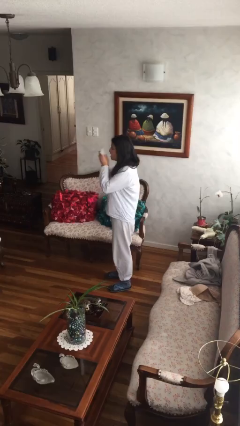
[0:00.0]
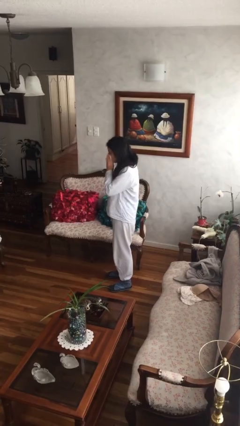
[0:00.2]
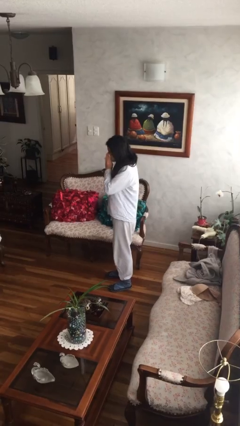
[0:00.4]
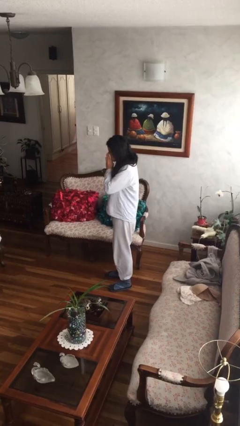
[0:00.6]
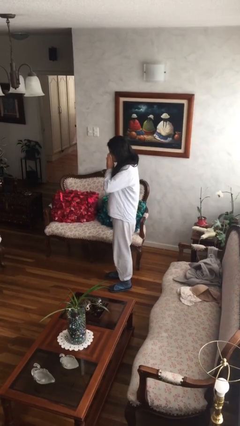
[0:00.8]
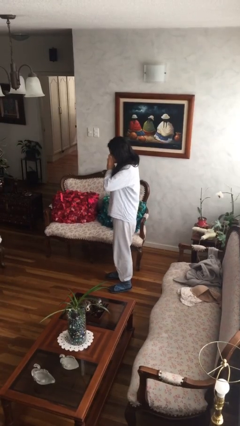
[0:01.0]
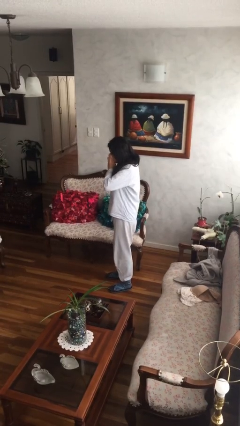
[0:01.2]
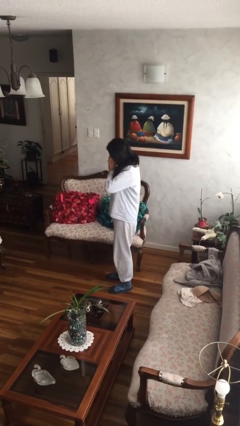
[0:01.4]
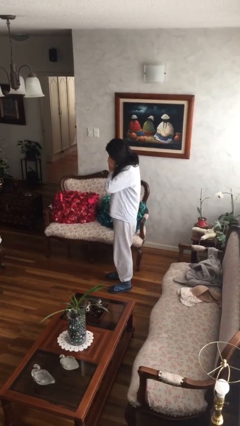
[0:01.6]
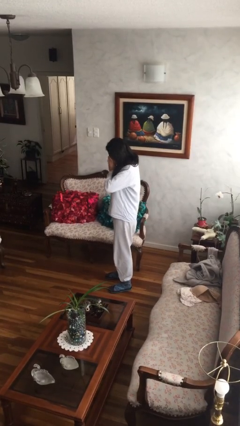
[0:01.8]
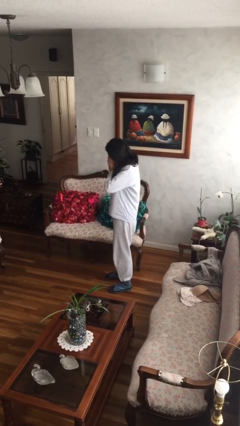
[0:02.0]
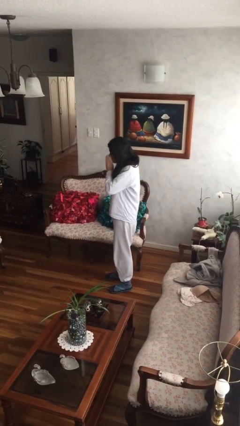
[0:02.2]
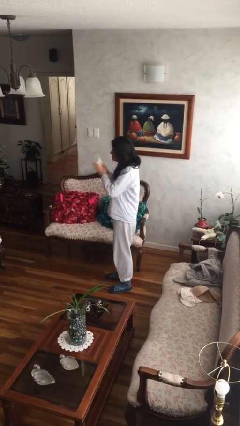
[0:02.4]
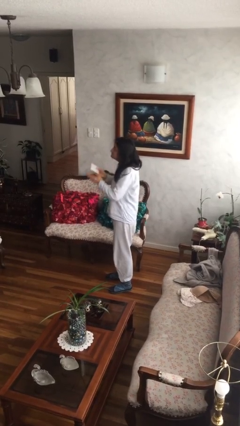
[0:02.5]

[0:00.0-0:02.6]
person blows nose

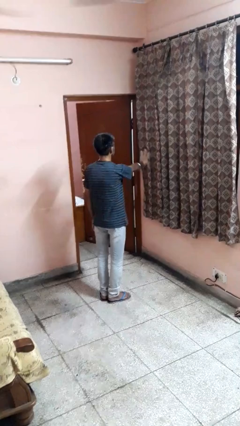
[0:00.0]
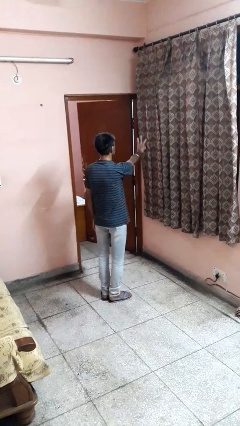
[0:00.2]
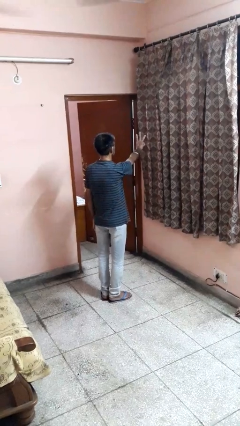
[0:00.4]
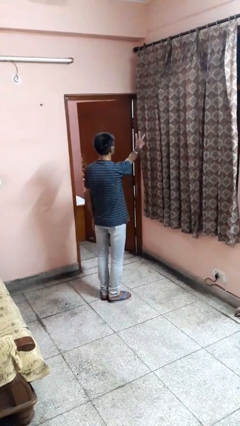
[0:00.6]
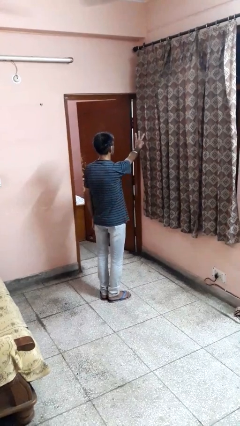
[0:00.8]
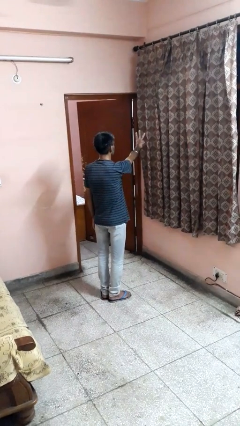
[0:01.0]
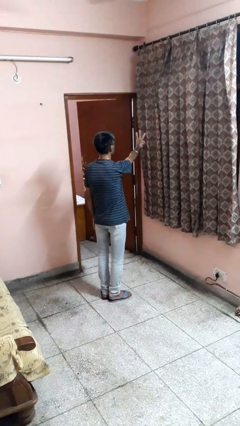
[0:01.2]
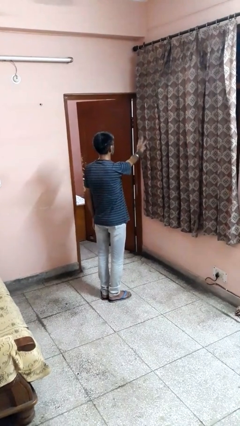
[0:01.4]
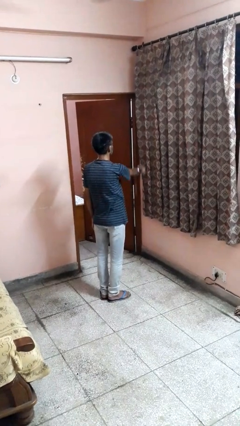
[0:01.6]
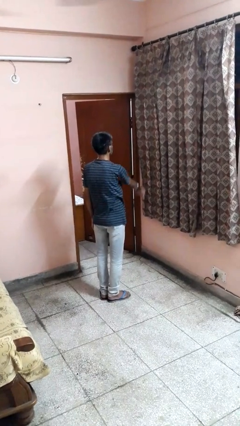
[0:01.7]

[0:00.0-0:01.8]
person gestures number three

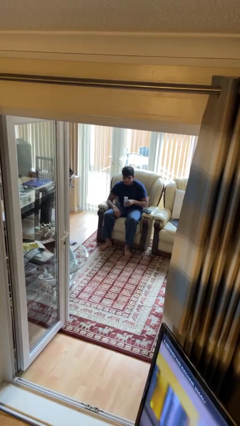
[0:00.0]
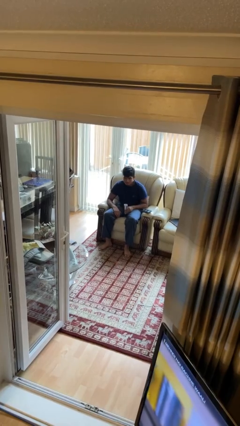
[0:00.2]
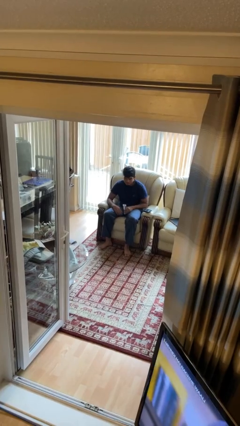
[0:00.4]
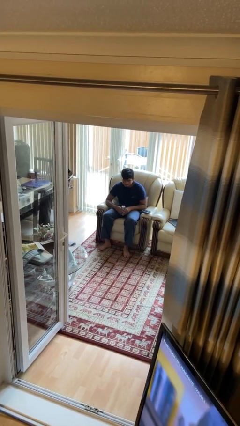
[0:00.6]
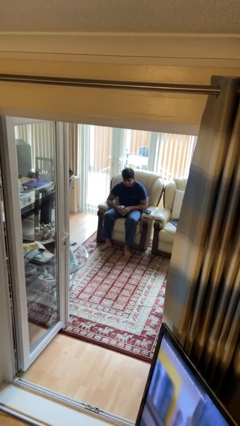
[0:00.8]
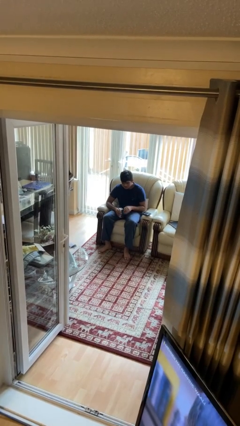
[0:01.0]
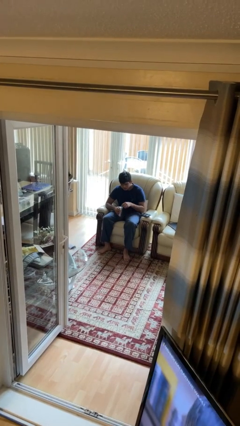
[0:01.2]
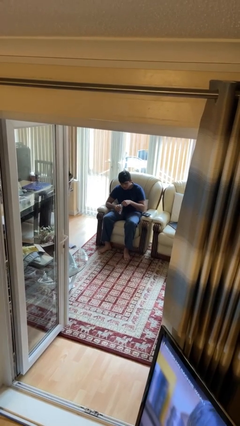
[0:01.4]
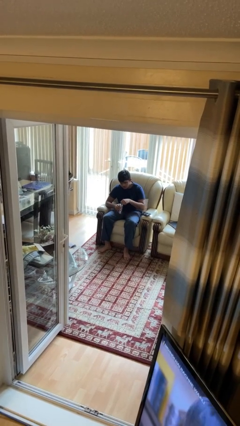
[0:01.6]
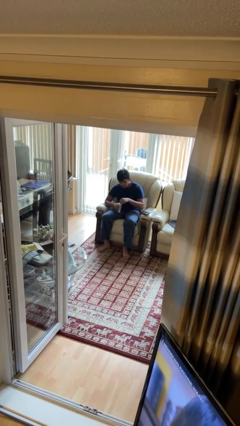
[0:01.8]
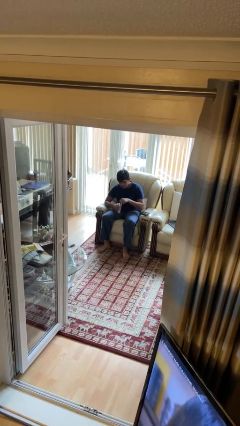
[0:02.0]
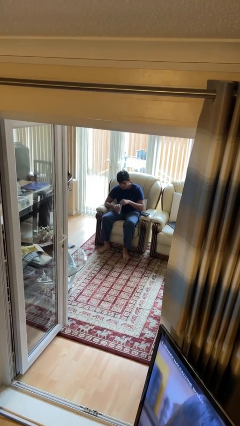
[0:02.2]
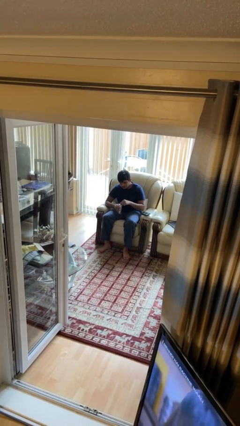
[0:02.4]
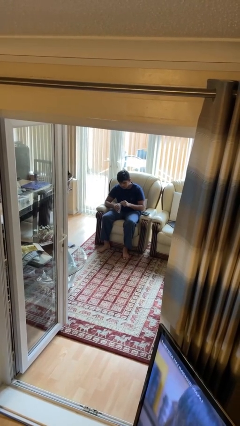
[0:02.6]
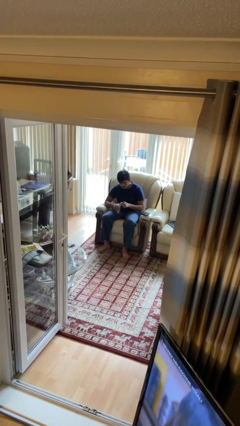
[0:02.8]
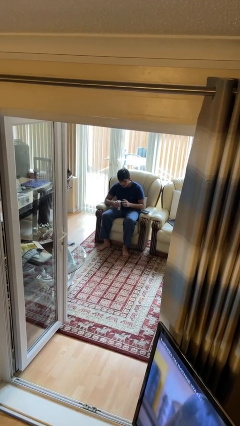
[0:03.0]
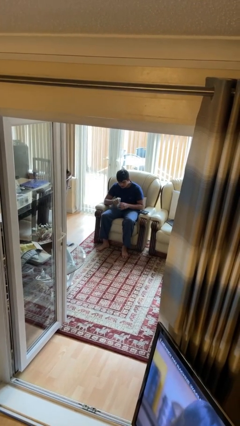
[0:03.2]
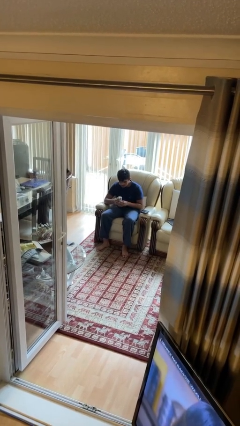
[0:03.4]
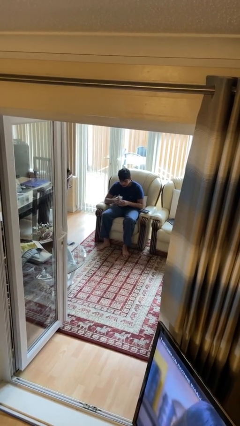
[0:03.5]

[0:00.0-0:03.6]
person opens beverage can

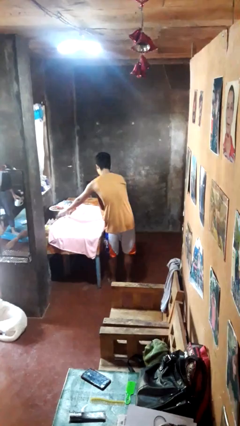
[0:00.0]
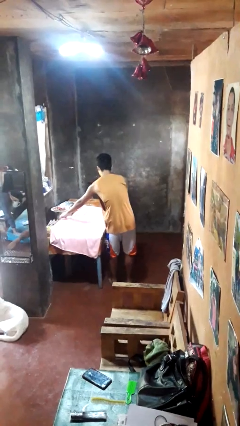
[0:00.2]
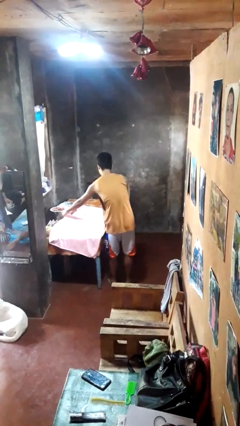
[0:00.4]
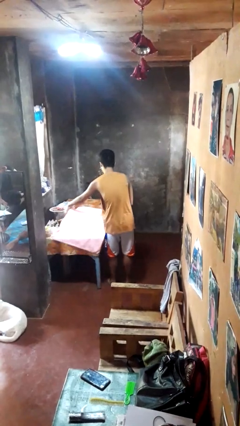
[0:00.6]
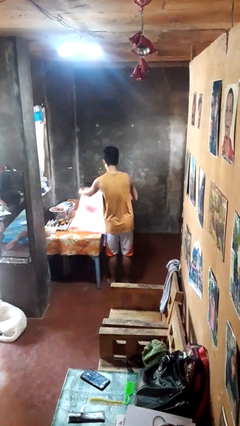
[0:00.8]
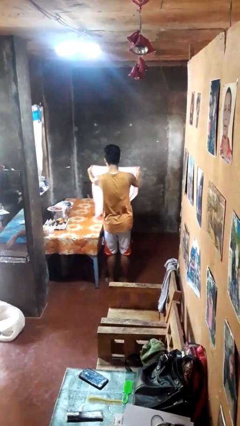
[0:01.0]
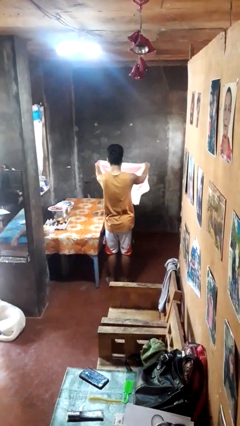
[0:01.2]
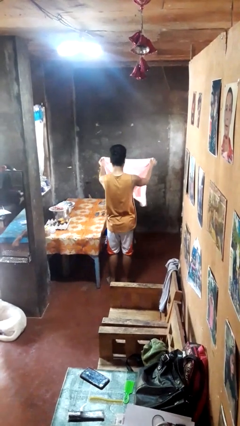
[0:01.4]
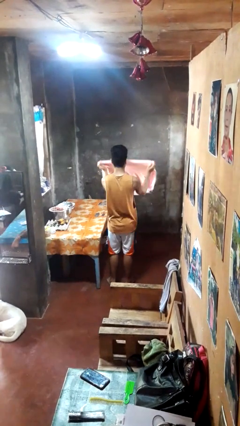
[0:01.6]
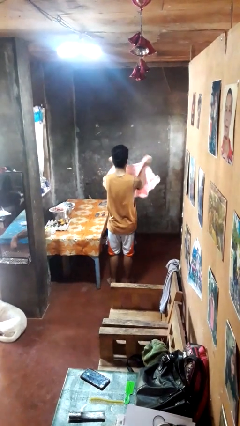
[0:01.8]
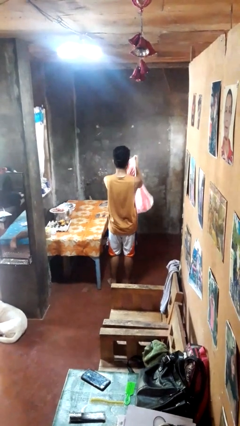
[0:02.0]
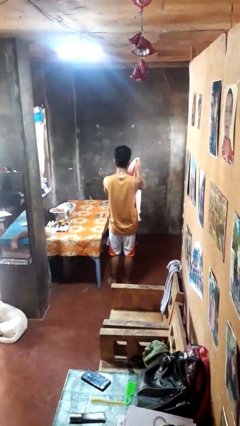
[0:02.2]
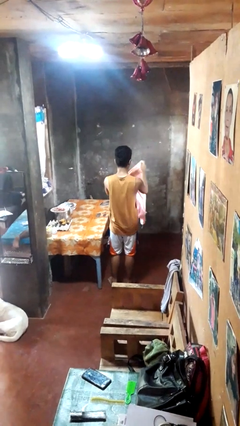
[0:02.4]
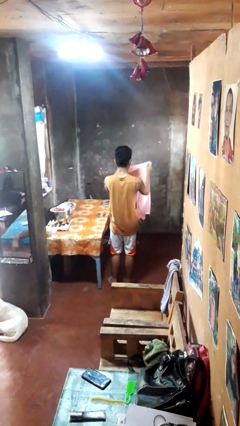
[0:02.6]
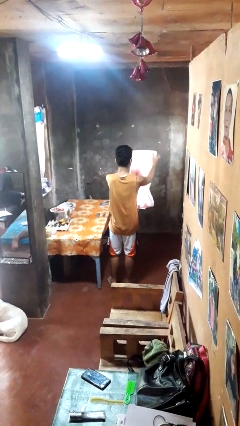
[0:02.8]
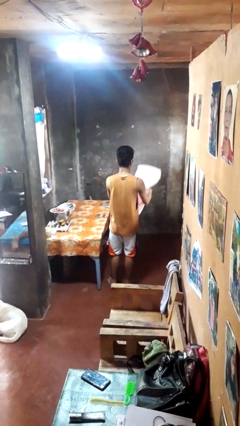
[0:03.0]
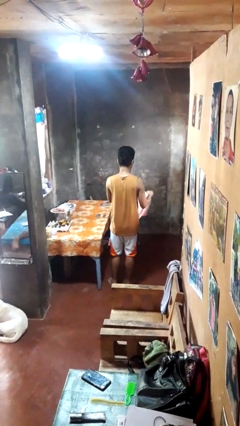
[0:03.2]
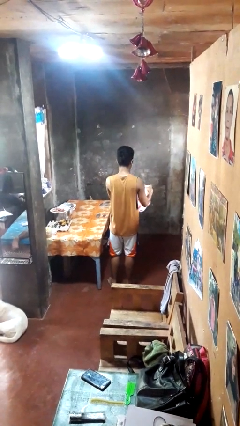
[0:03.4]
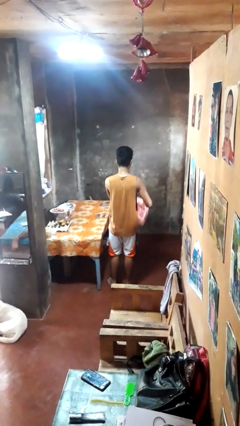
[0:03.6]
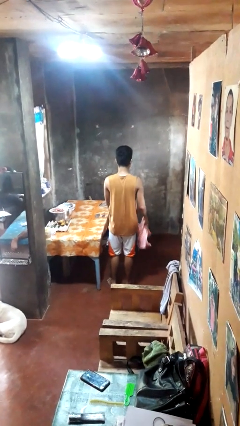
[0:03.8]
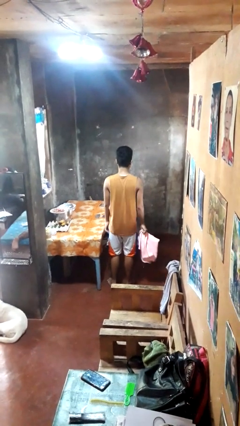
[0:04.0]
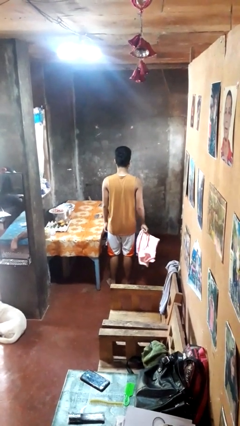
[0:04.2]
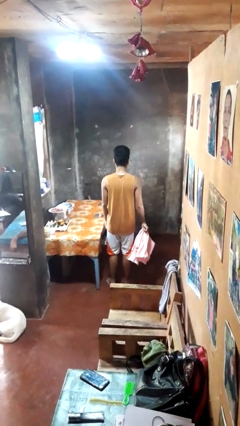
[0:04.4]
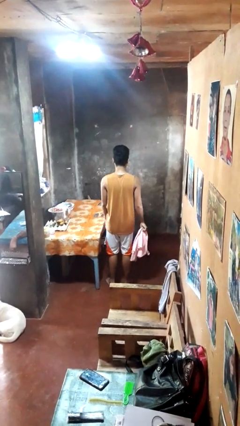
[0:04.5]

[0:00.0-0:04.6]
person folds tablecloth

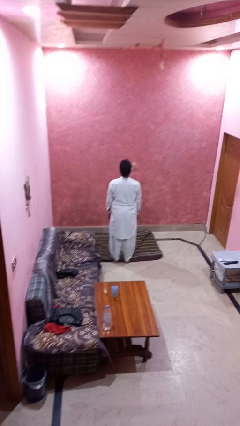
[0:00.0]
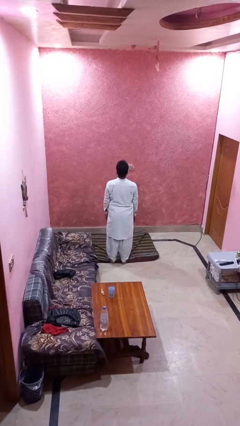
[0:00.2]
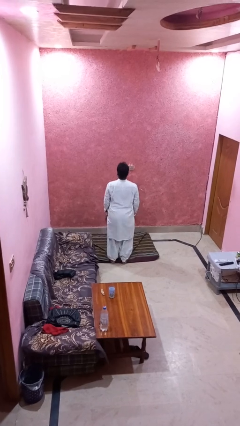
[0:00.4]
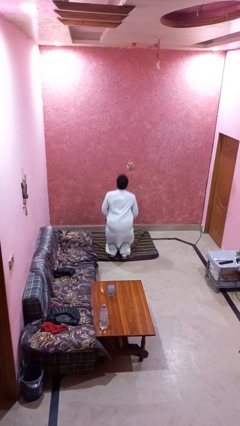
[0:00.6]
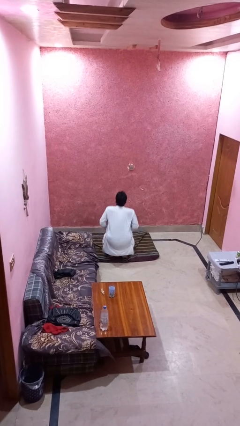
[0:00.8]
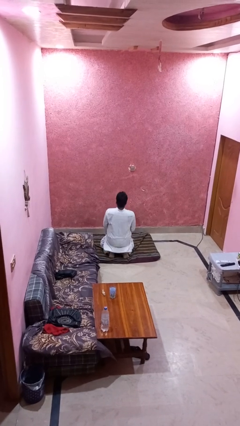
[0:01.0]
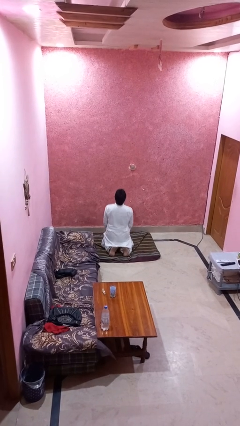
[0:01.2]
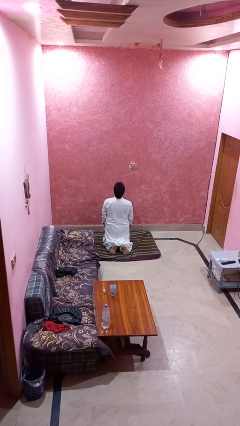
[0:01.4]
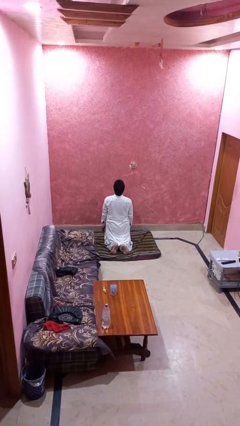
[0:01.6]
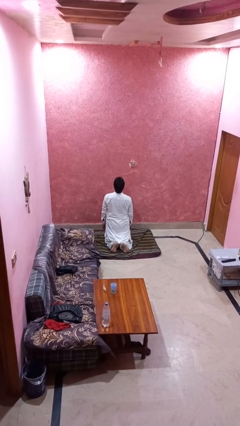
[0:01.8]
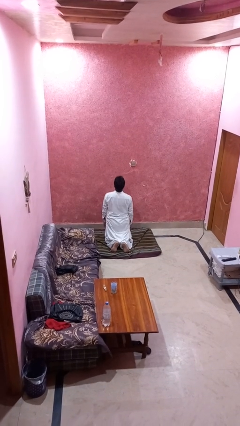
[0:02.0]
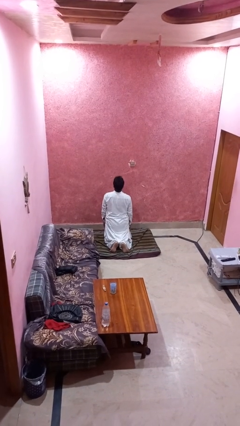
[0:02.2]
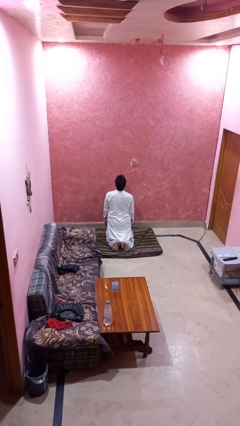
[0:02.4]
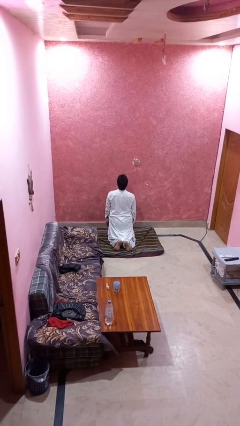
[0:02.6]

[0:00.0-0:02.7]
person kneels

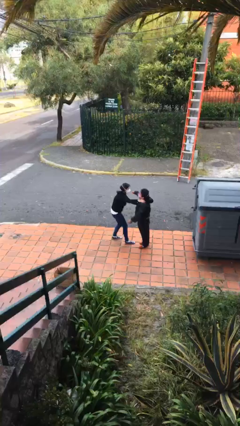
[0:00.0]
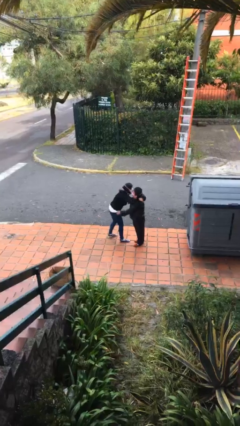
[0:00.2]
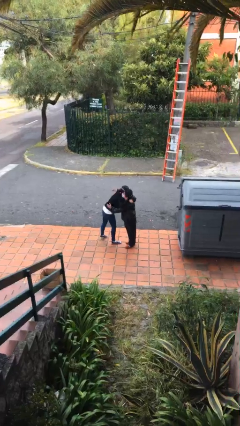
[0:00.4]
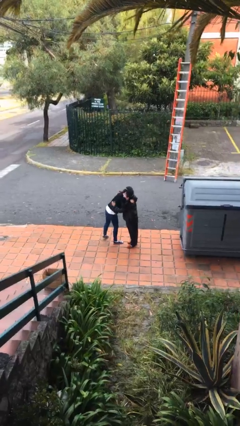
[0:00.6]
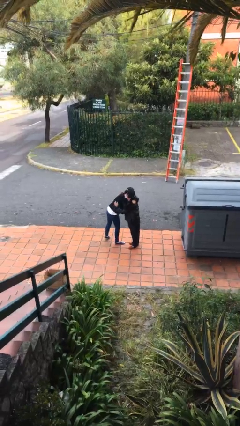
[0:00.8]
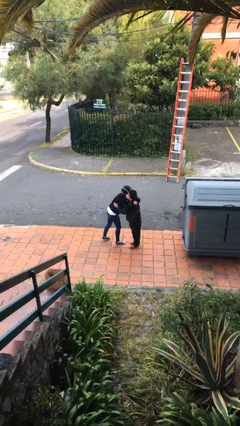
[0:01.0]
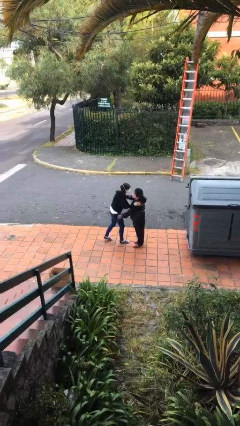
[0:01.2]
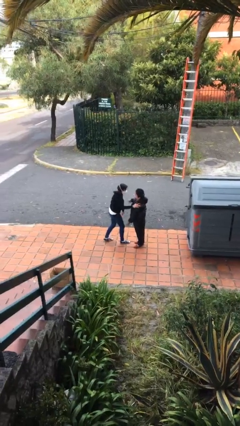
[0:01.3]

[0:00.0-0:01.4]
person embraces person

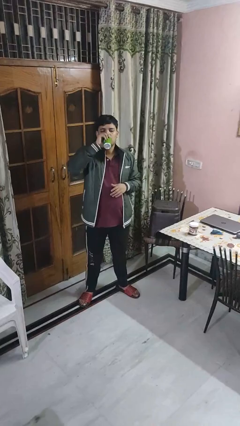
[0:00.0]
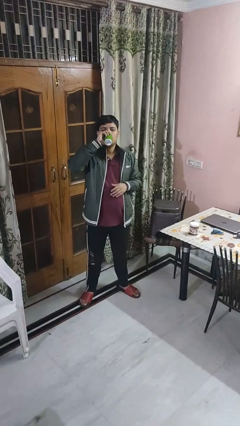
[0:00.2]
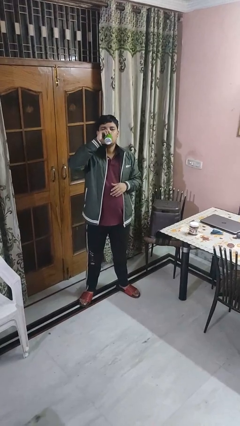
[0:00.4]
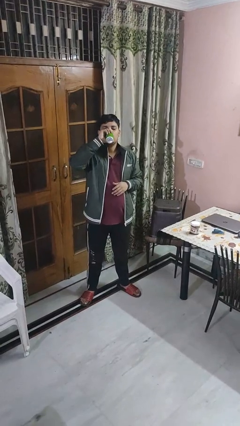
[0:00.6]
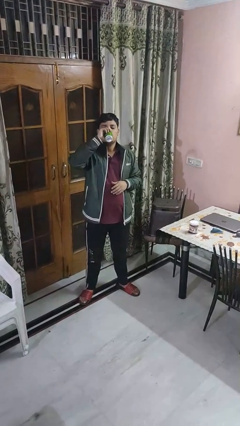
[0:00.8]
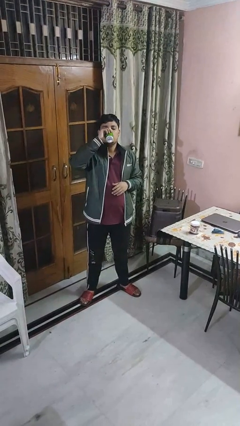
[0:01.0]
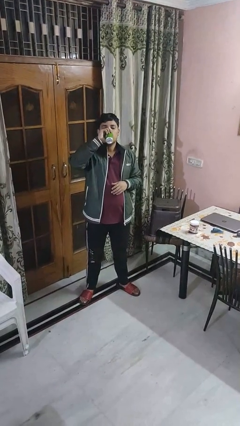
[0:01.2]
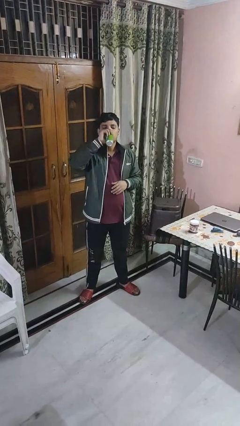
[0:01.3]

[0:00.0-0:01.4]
person drinks from beverage can
